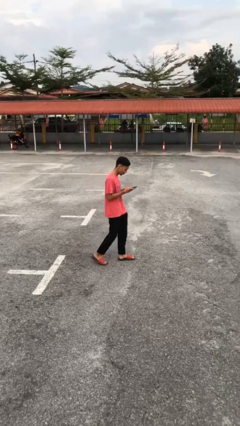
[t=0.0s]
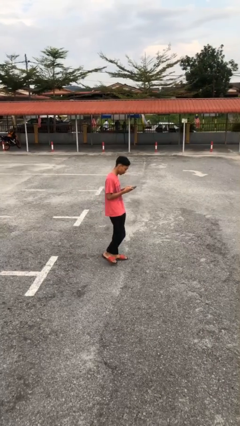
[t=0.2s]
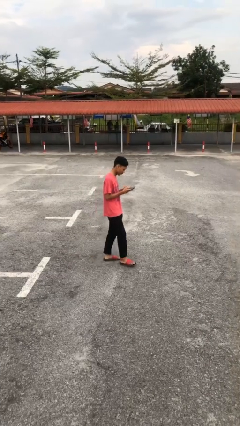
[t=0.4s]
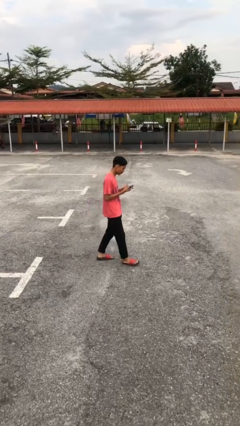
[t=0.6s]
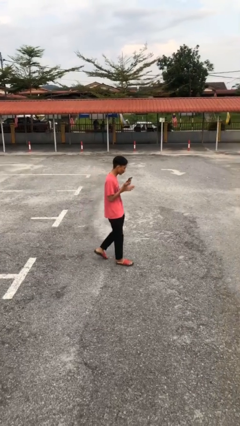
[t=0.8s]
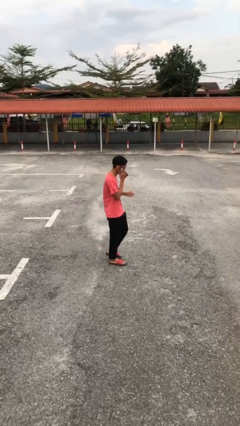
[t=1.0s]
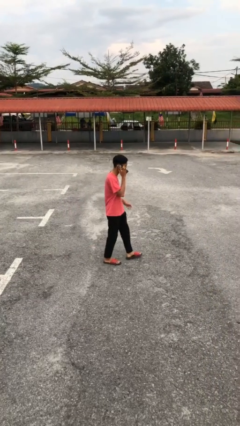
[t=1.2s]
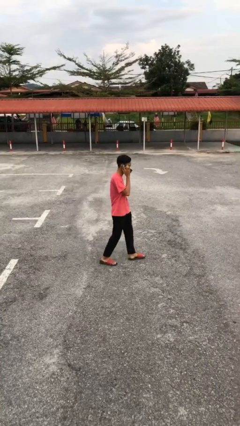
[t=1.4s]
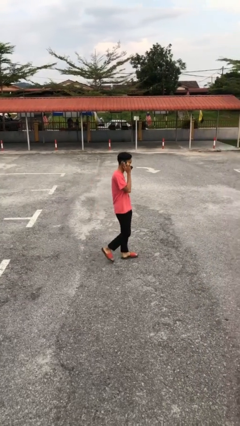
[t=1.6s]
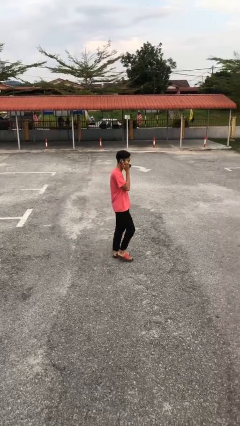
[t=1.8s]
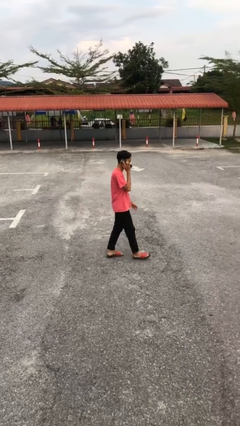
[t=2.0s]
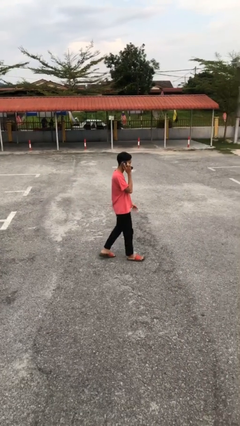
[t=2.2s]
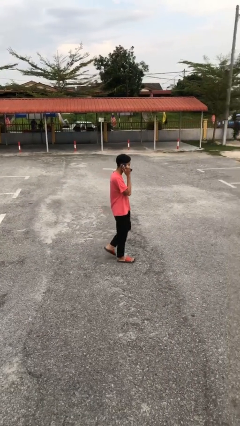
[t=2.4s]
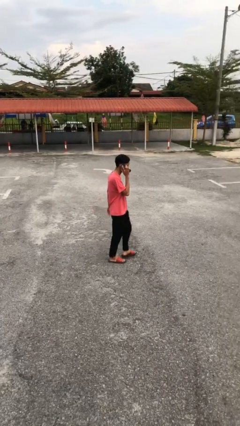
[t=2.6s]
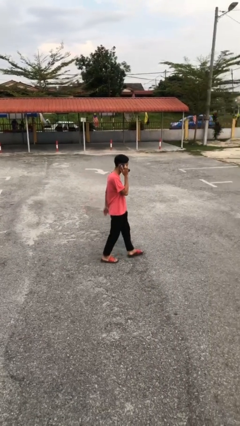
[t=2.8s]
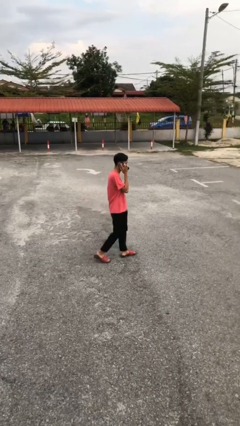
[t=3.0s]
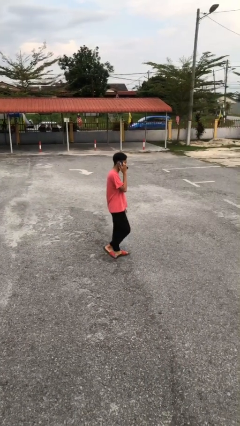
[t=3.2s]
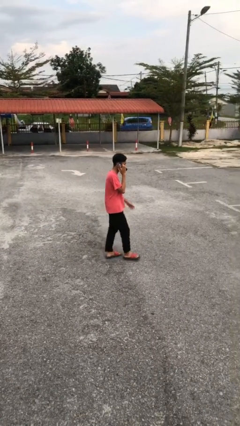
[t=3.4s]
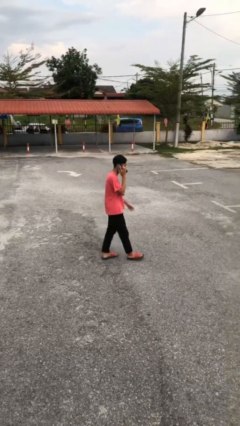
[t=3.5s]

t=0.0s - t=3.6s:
person talks on phone

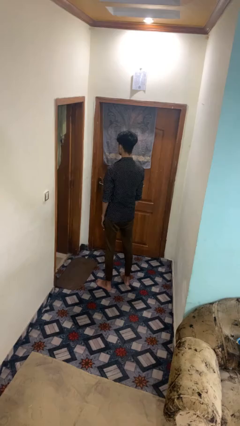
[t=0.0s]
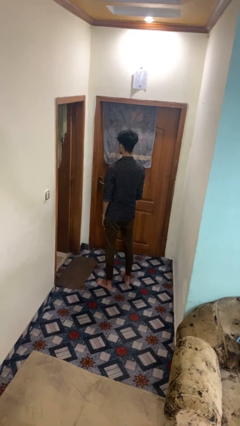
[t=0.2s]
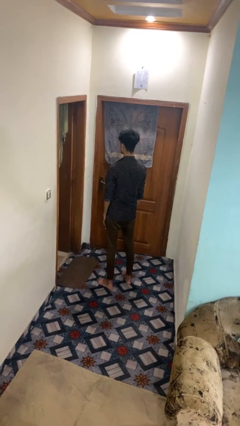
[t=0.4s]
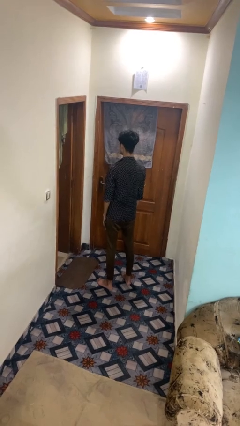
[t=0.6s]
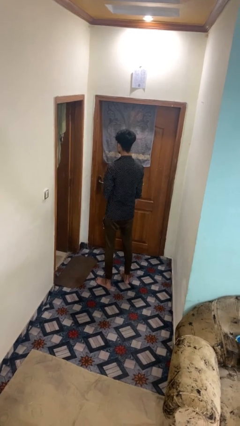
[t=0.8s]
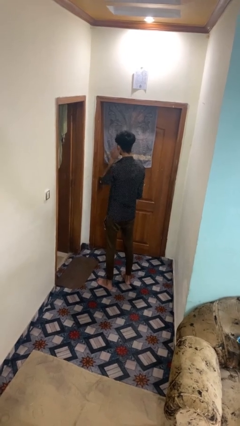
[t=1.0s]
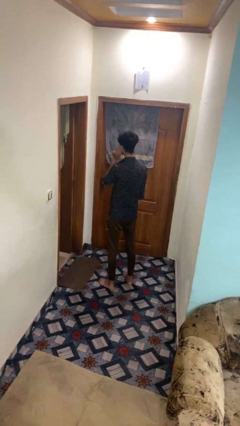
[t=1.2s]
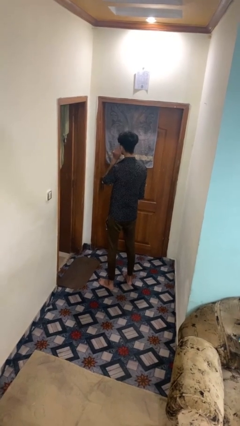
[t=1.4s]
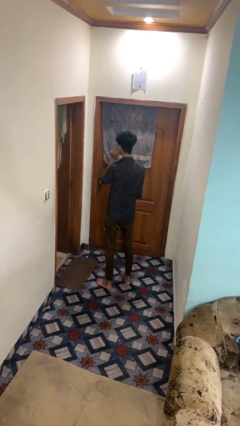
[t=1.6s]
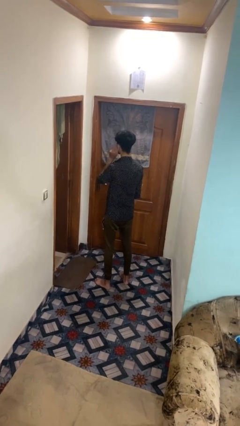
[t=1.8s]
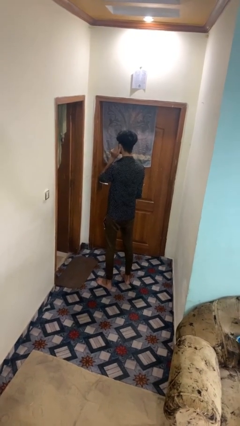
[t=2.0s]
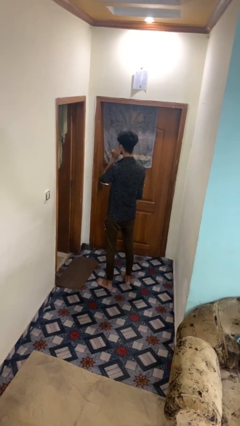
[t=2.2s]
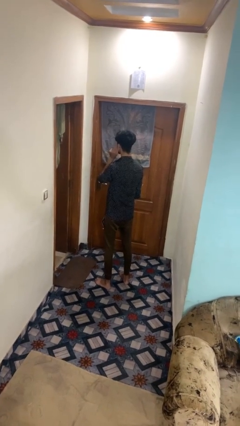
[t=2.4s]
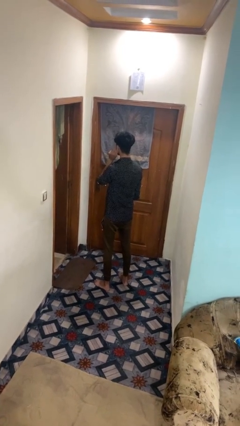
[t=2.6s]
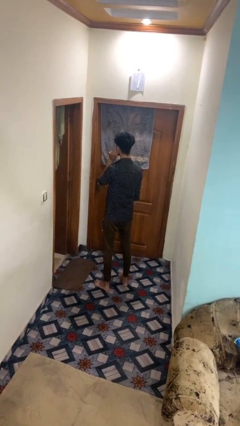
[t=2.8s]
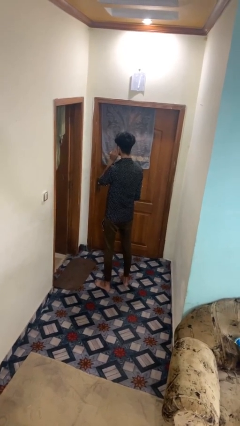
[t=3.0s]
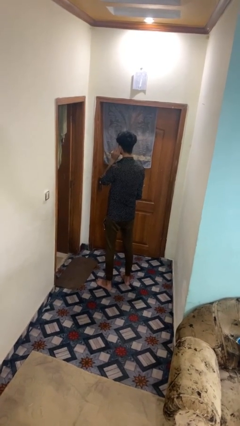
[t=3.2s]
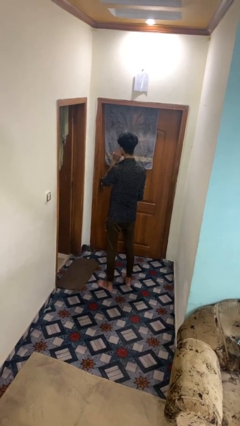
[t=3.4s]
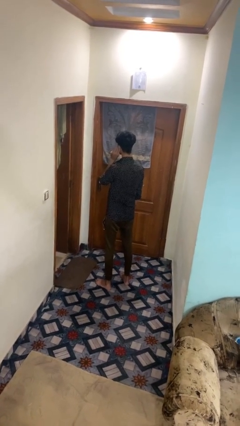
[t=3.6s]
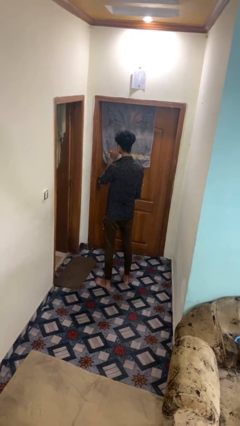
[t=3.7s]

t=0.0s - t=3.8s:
person touches earlobe

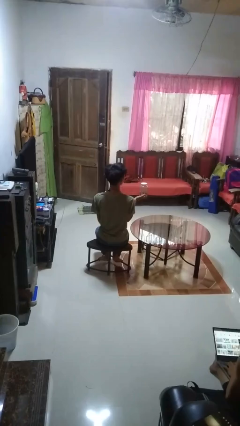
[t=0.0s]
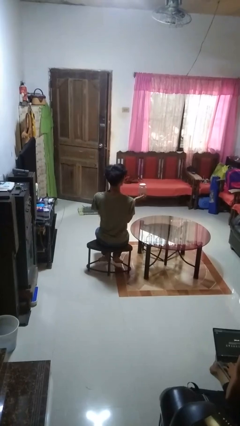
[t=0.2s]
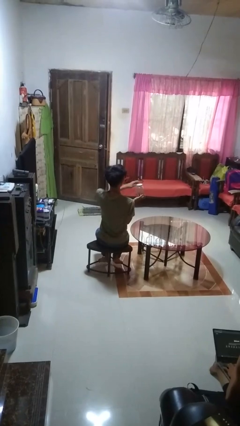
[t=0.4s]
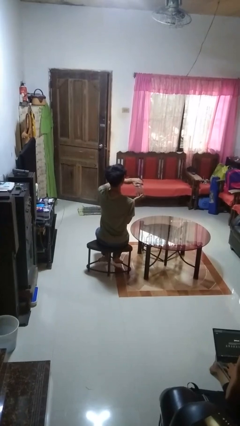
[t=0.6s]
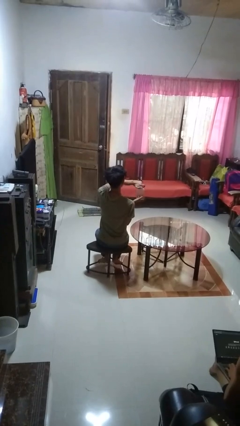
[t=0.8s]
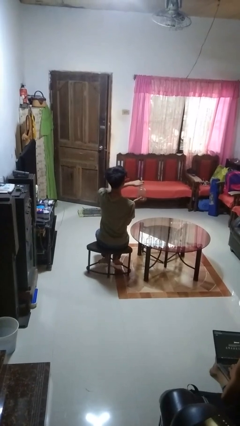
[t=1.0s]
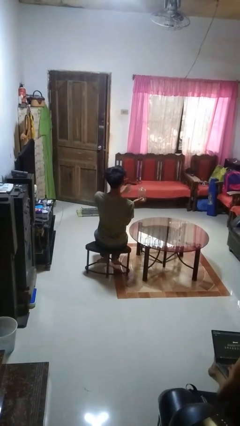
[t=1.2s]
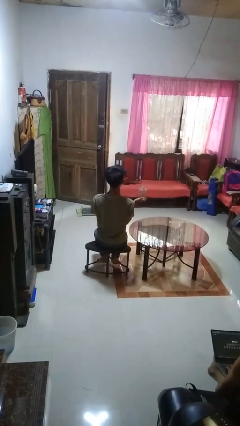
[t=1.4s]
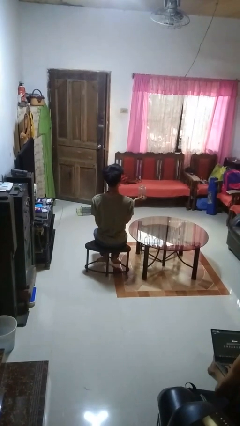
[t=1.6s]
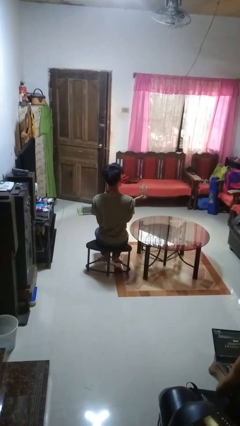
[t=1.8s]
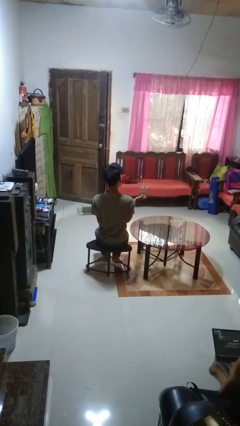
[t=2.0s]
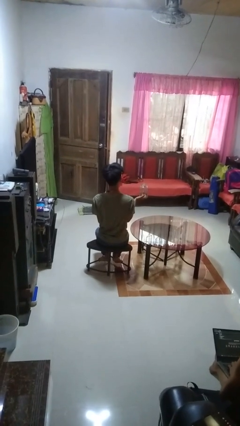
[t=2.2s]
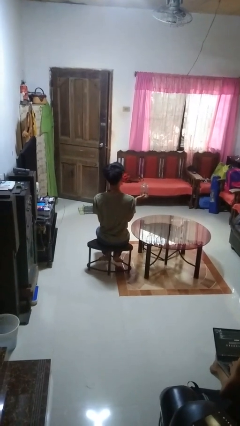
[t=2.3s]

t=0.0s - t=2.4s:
person opens jar

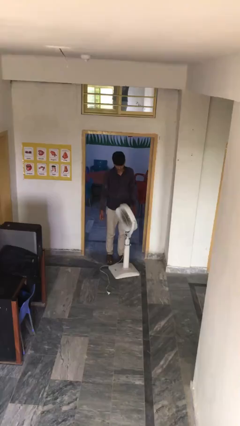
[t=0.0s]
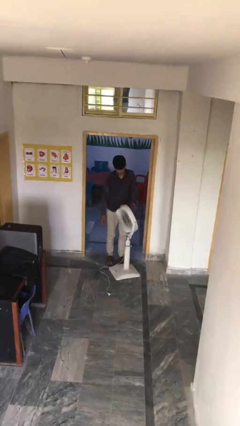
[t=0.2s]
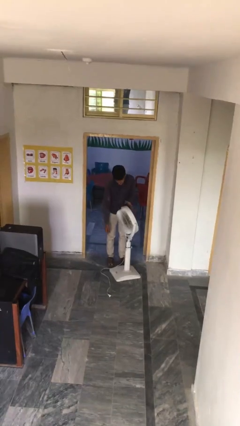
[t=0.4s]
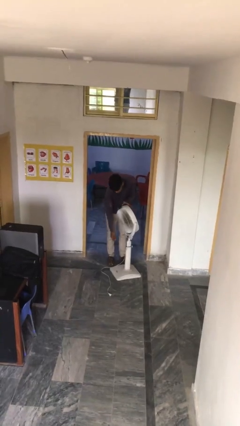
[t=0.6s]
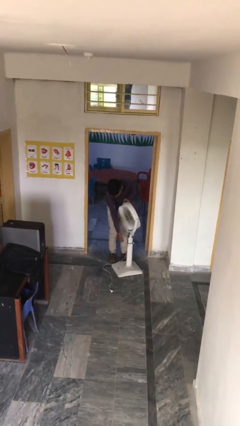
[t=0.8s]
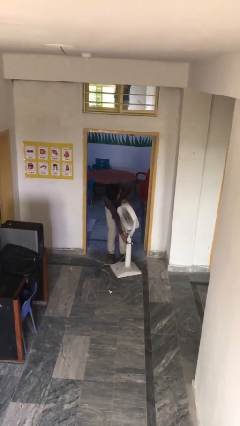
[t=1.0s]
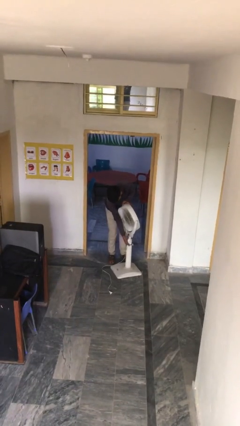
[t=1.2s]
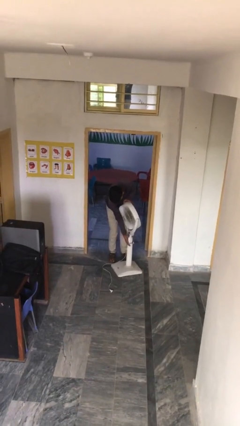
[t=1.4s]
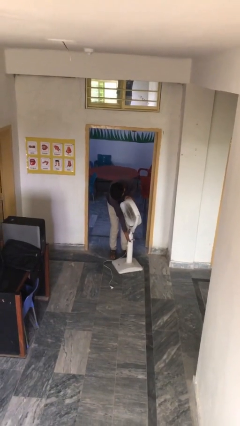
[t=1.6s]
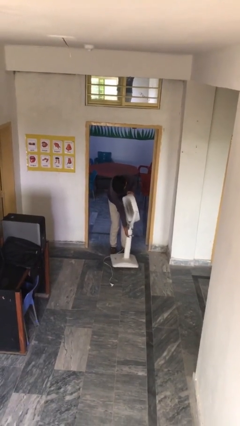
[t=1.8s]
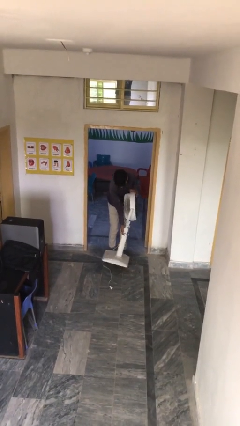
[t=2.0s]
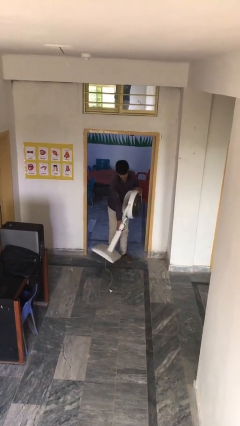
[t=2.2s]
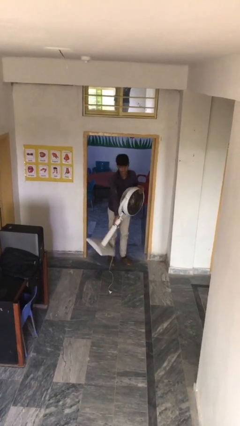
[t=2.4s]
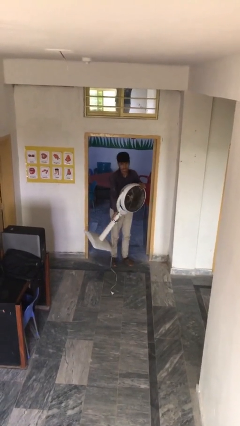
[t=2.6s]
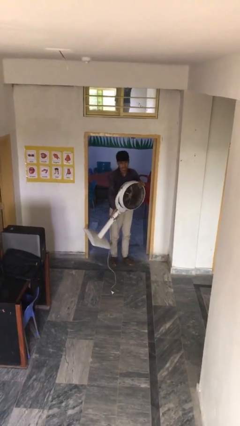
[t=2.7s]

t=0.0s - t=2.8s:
person picks up object from floor

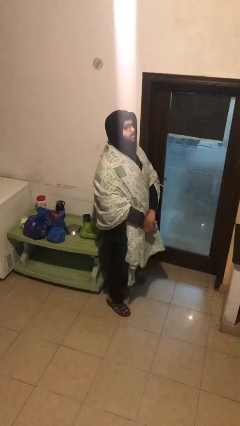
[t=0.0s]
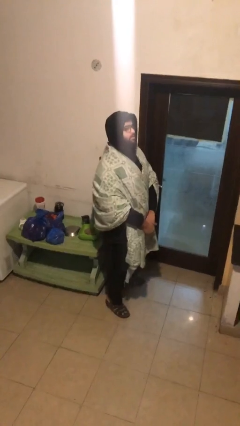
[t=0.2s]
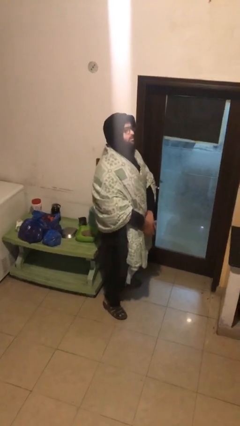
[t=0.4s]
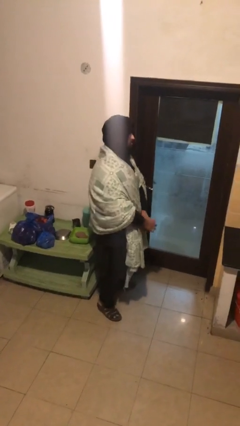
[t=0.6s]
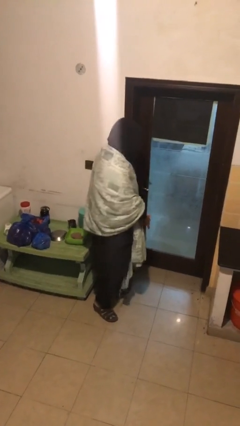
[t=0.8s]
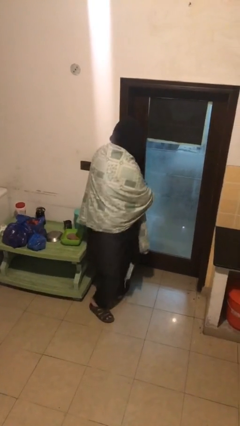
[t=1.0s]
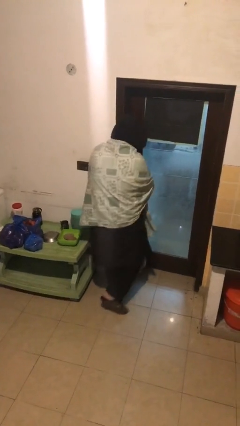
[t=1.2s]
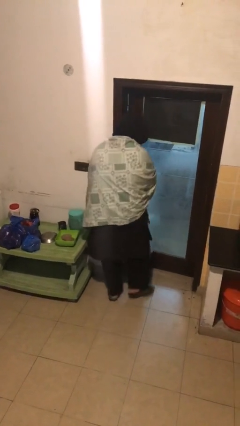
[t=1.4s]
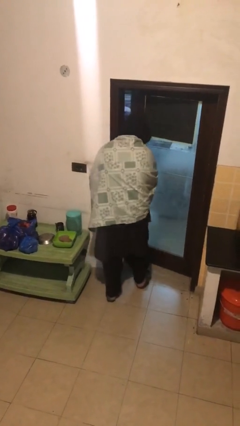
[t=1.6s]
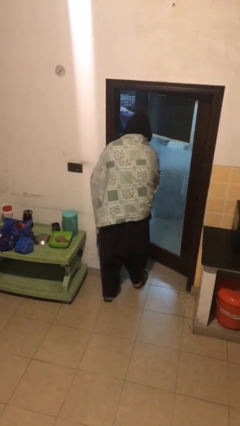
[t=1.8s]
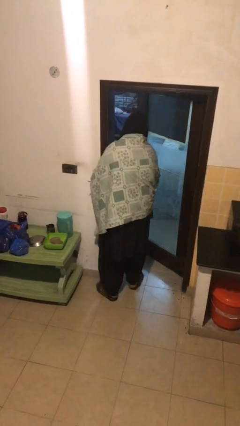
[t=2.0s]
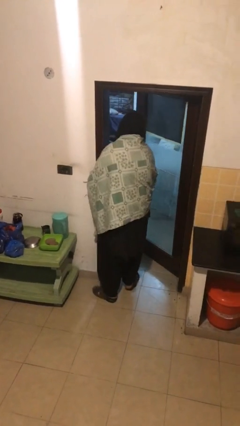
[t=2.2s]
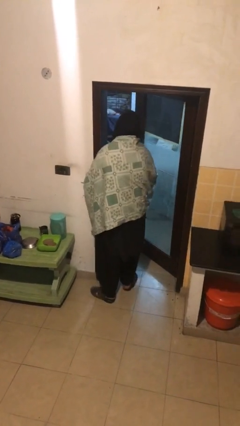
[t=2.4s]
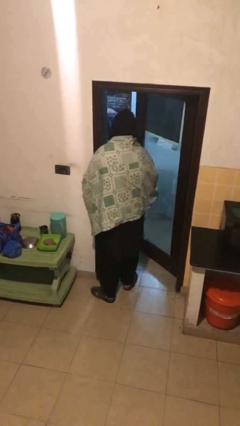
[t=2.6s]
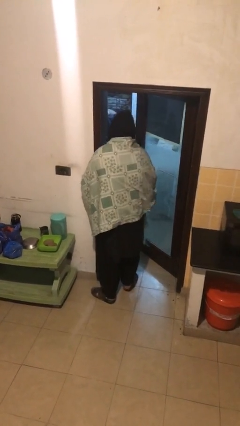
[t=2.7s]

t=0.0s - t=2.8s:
person opens facility door

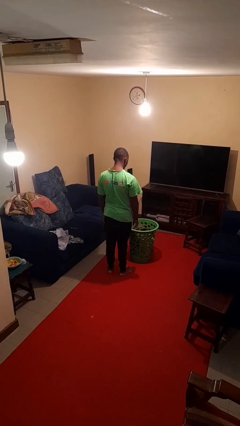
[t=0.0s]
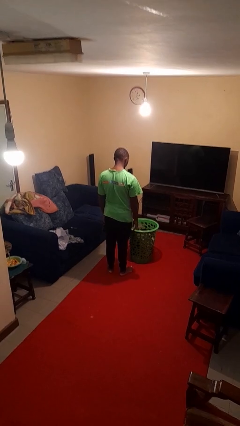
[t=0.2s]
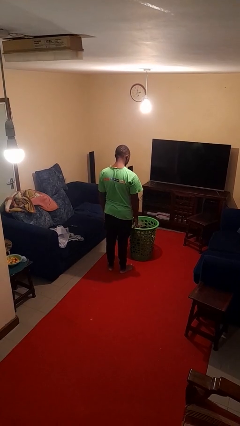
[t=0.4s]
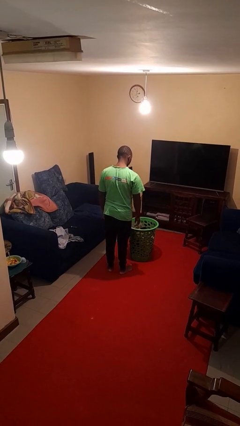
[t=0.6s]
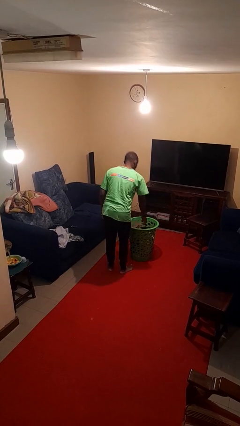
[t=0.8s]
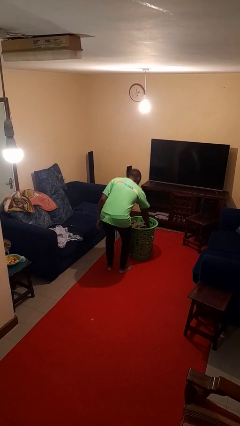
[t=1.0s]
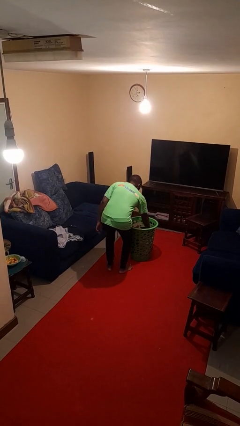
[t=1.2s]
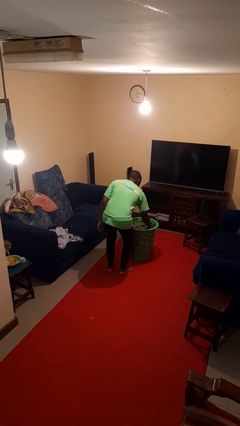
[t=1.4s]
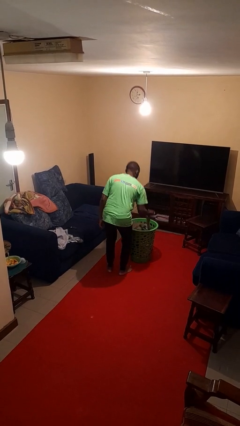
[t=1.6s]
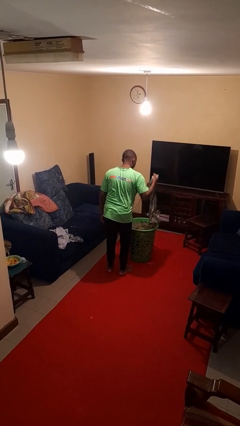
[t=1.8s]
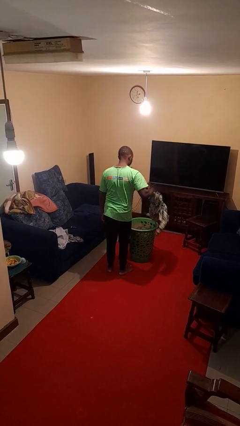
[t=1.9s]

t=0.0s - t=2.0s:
person takes object from basket
